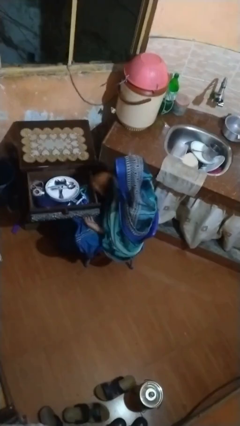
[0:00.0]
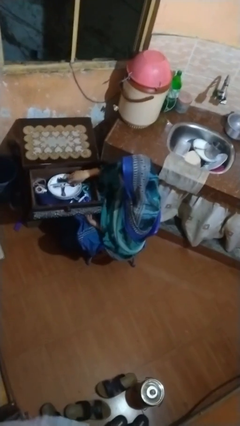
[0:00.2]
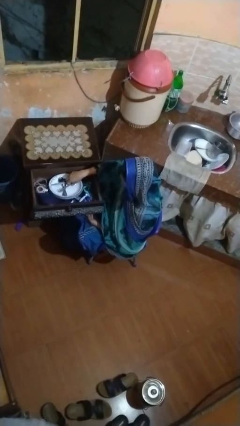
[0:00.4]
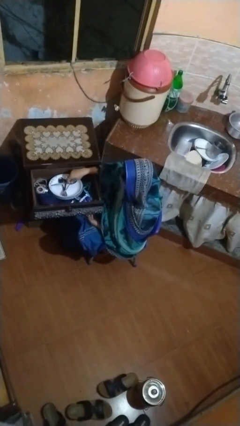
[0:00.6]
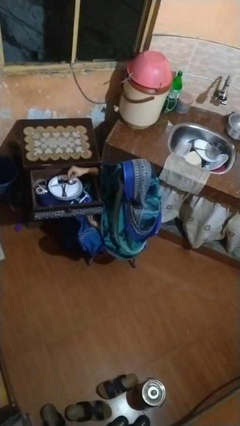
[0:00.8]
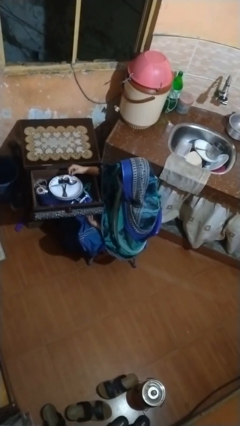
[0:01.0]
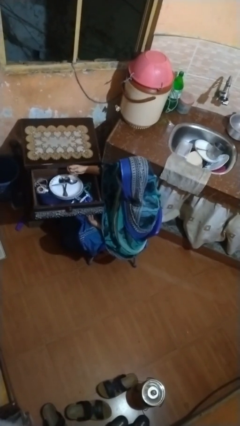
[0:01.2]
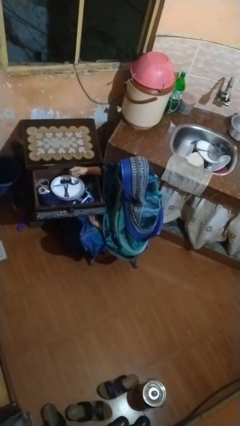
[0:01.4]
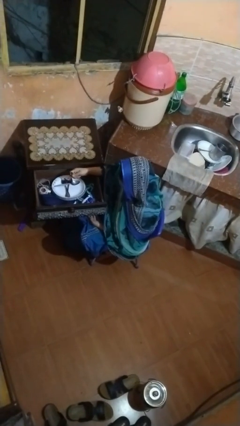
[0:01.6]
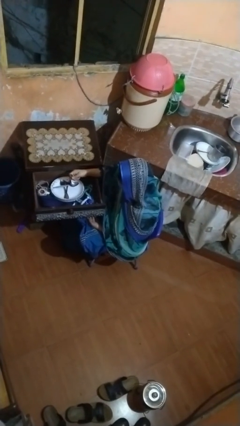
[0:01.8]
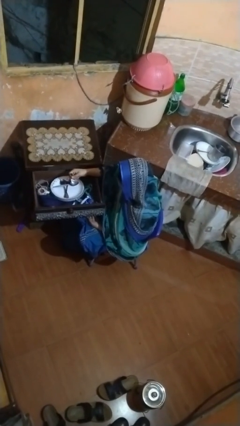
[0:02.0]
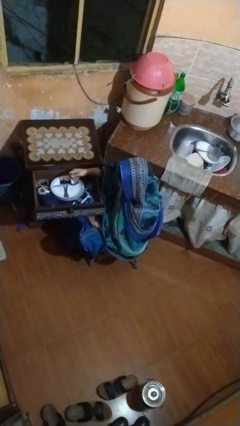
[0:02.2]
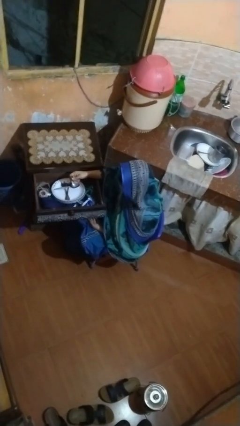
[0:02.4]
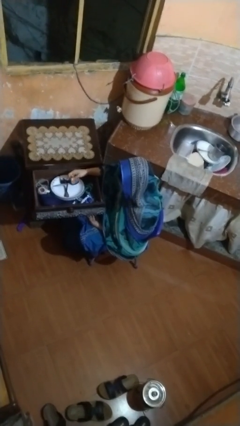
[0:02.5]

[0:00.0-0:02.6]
person takes object from kitchen drawer

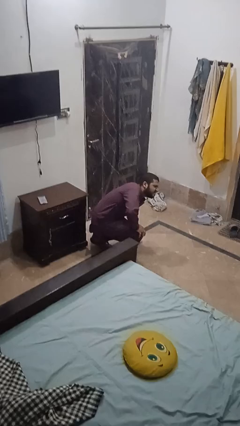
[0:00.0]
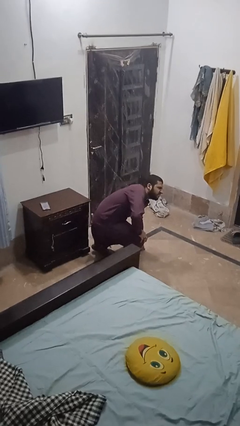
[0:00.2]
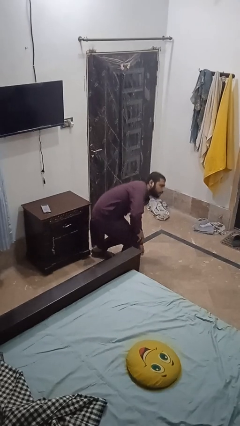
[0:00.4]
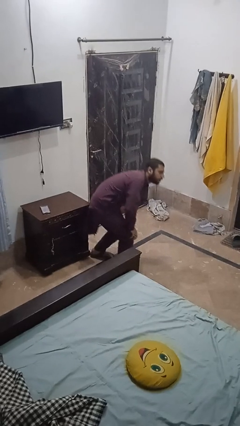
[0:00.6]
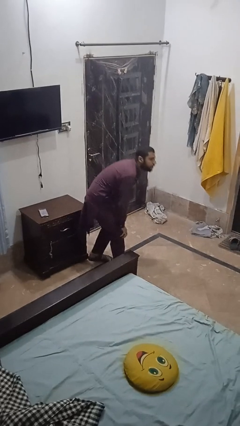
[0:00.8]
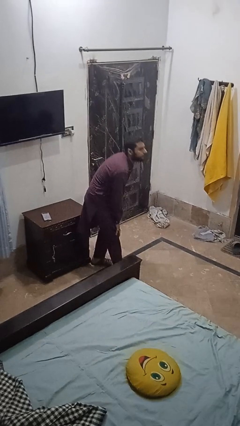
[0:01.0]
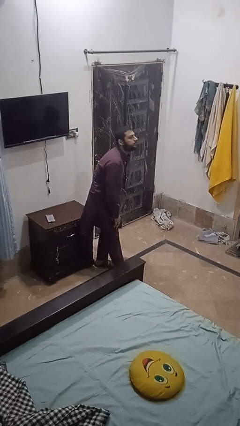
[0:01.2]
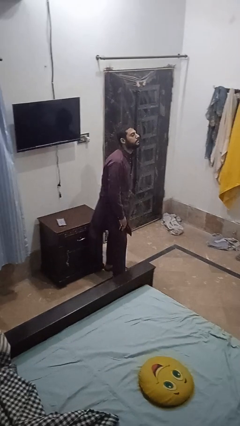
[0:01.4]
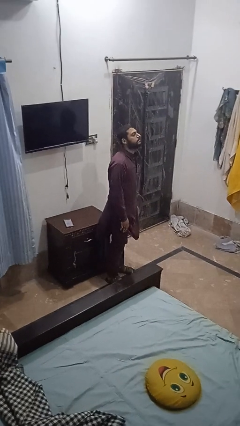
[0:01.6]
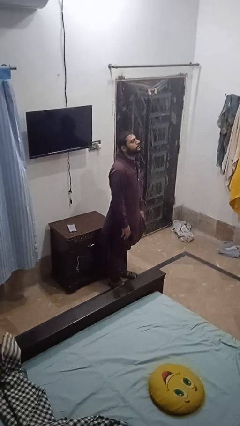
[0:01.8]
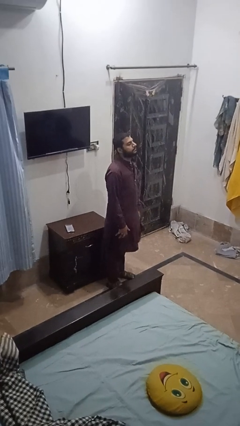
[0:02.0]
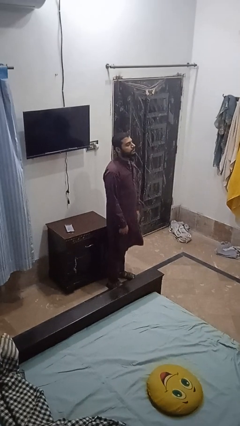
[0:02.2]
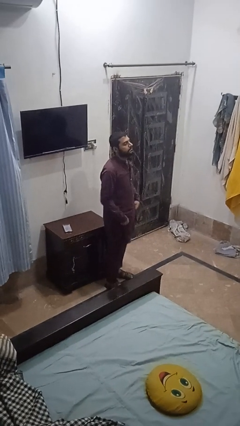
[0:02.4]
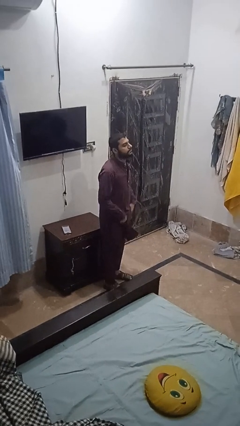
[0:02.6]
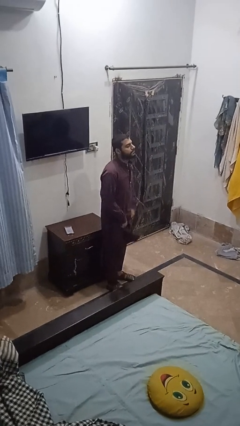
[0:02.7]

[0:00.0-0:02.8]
person stands up from floor

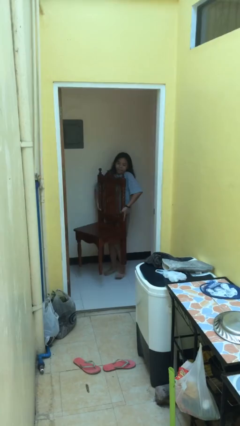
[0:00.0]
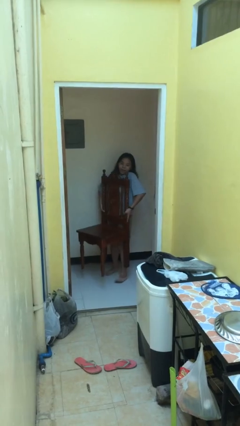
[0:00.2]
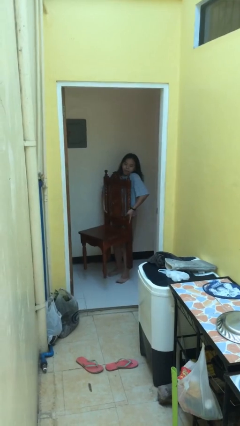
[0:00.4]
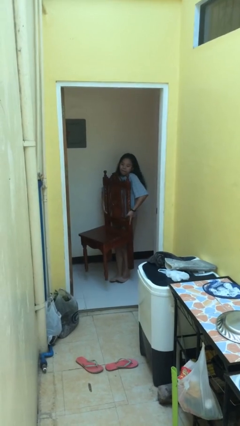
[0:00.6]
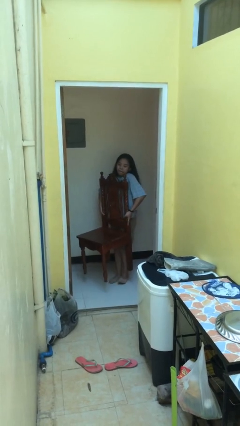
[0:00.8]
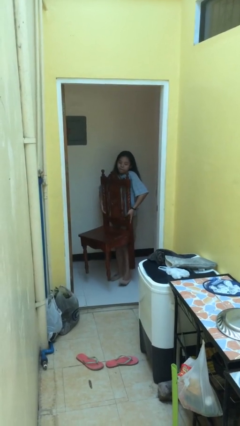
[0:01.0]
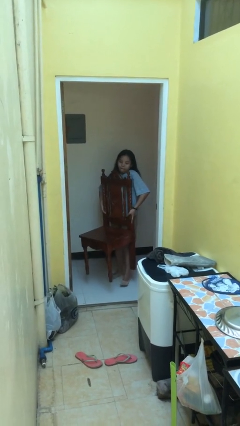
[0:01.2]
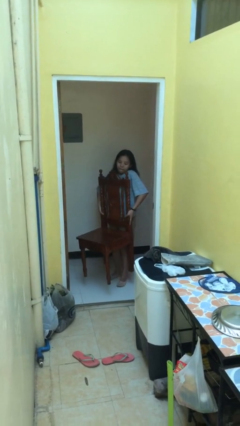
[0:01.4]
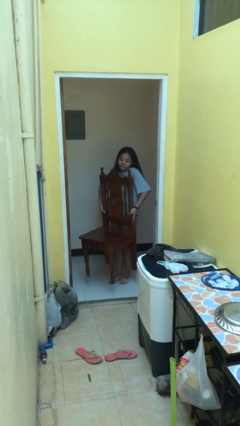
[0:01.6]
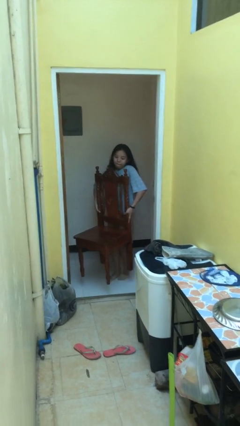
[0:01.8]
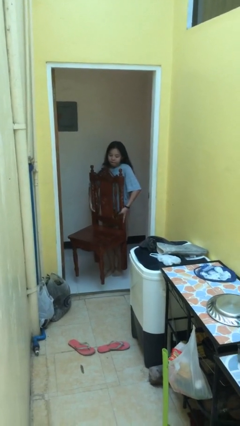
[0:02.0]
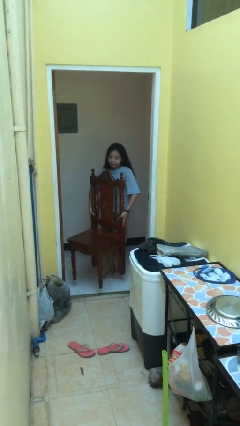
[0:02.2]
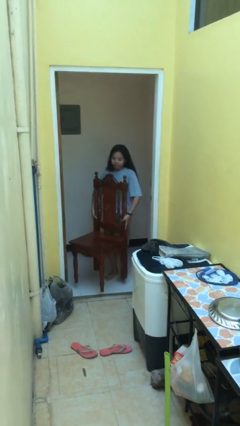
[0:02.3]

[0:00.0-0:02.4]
person carries heavy object

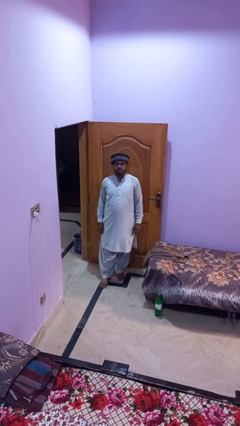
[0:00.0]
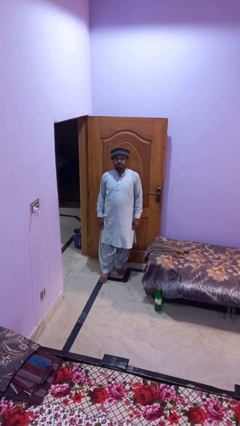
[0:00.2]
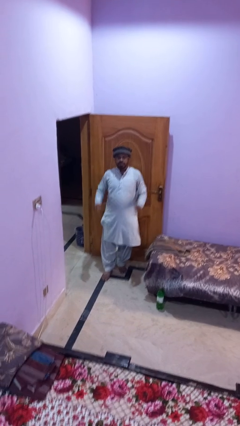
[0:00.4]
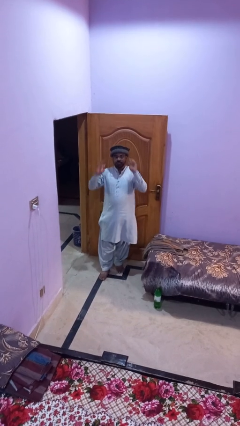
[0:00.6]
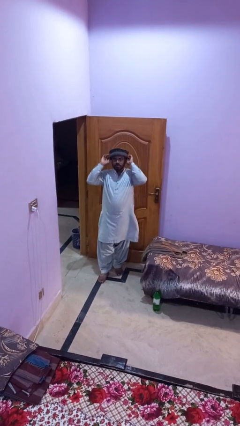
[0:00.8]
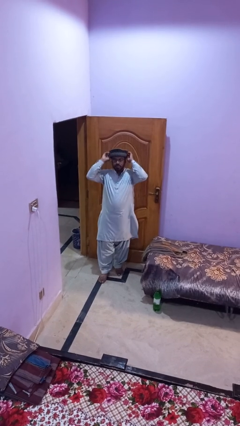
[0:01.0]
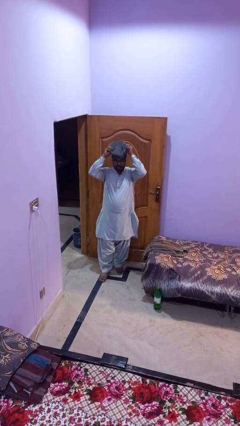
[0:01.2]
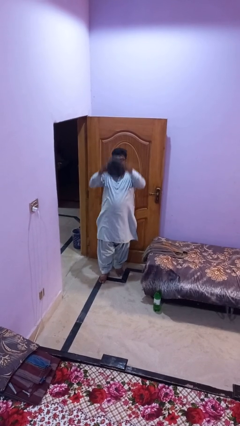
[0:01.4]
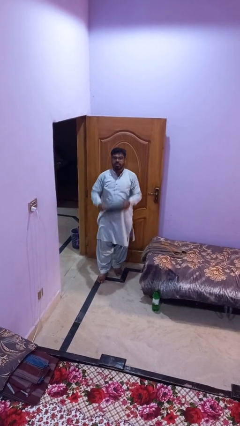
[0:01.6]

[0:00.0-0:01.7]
person takes off hat

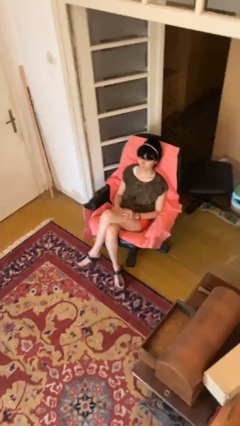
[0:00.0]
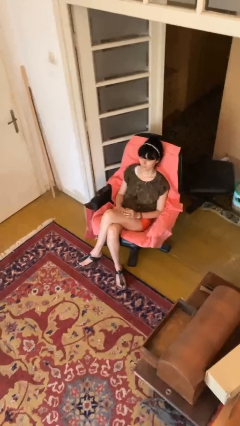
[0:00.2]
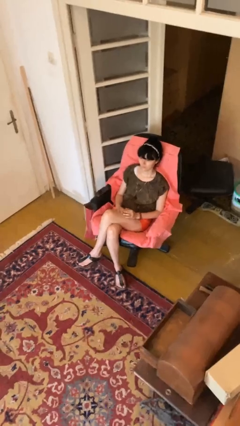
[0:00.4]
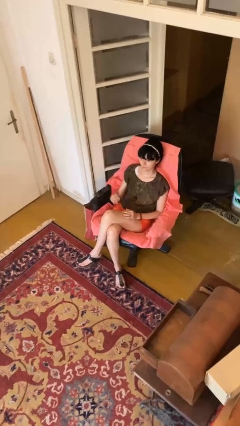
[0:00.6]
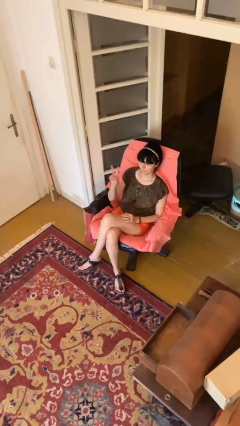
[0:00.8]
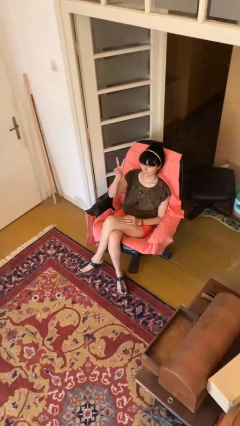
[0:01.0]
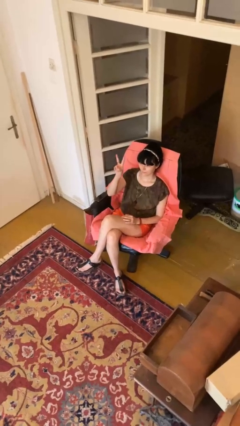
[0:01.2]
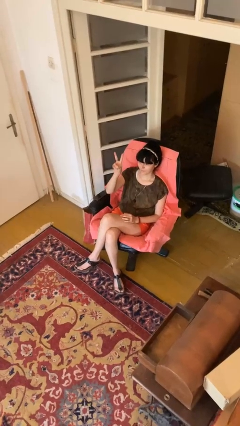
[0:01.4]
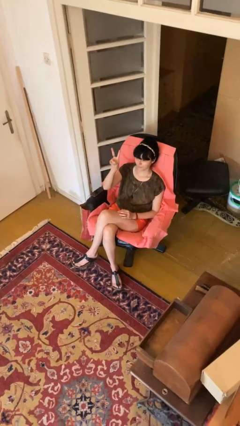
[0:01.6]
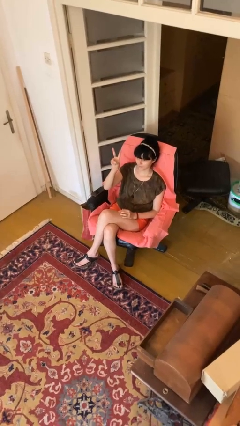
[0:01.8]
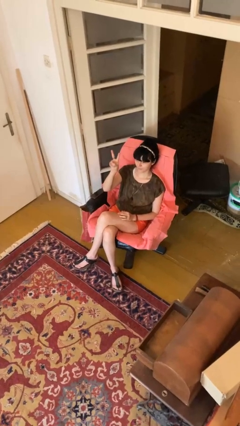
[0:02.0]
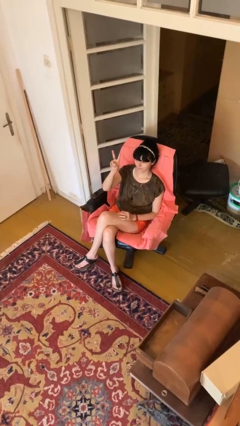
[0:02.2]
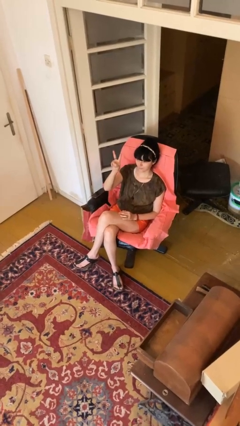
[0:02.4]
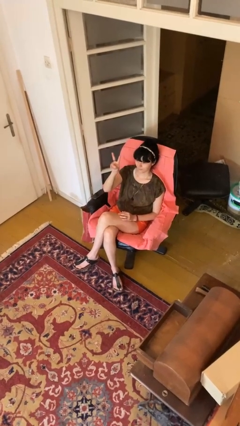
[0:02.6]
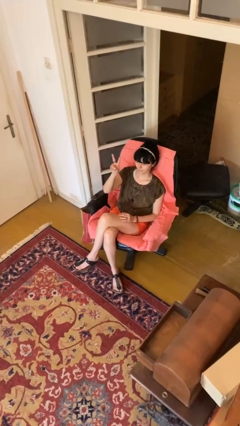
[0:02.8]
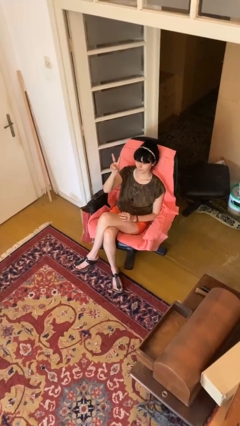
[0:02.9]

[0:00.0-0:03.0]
person gestures peace

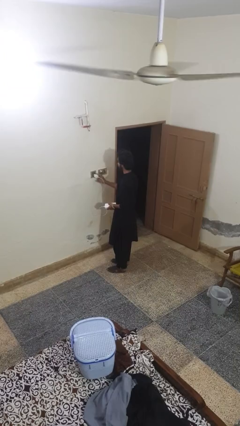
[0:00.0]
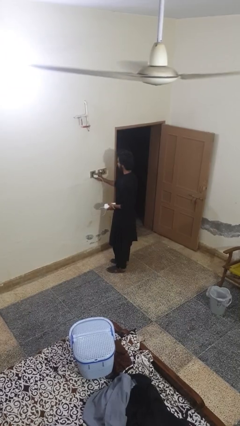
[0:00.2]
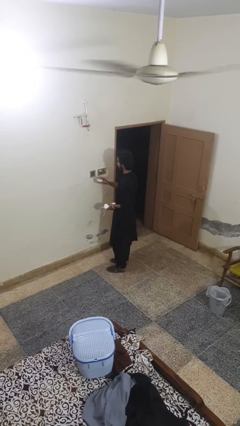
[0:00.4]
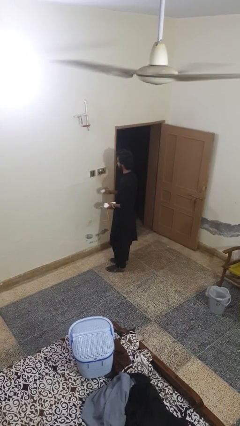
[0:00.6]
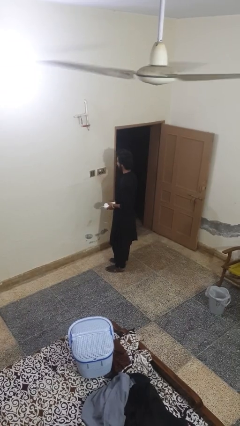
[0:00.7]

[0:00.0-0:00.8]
person unplugs from electrical socket

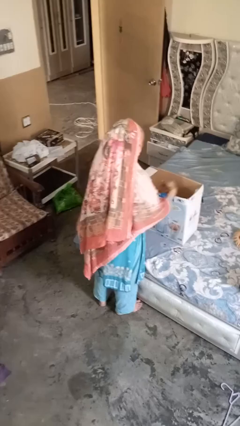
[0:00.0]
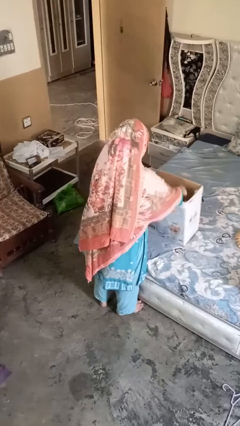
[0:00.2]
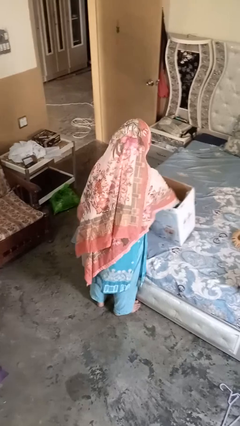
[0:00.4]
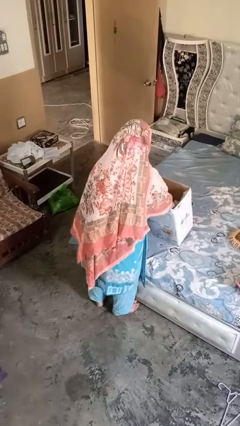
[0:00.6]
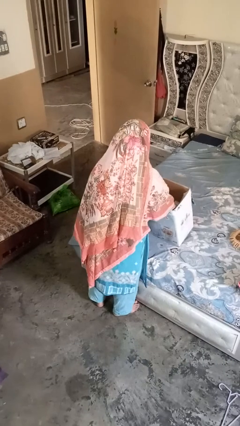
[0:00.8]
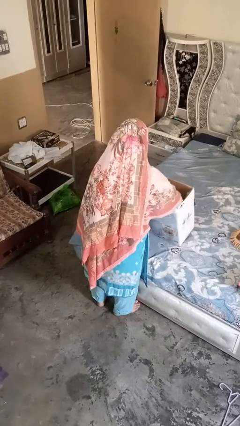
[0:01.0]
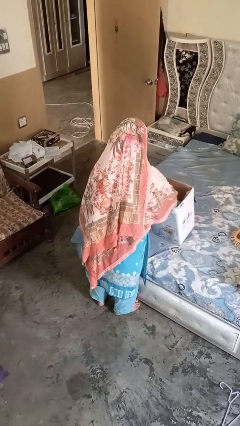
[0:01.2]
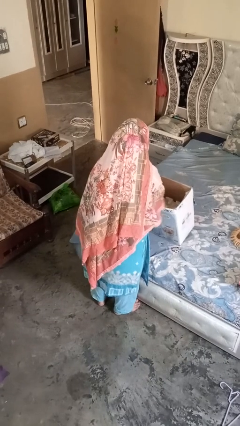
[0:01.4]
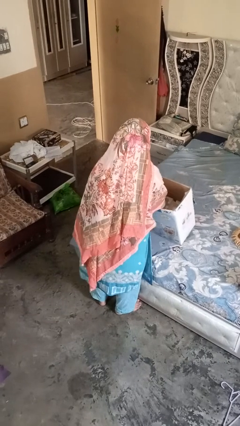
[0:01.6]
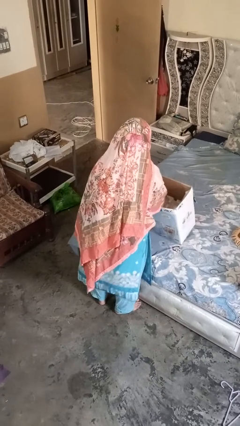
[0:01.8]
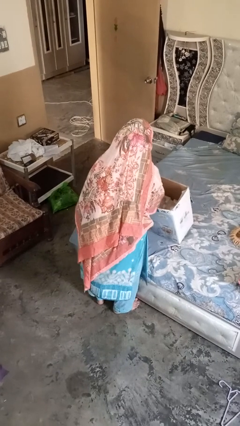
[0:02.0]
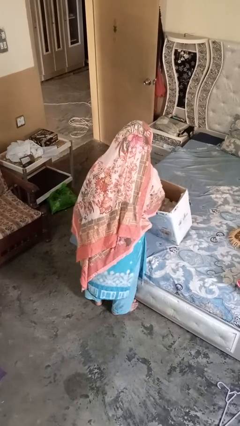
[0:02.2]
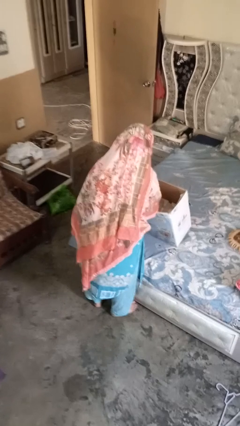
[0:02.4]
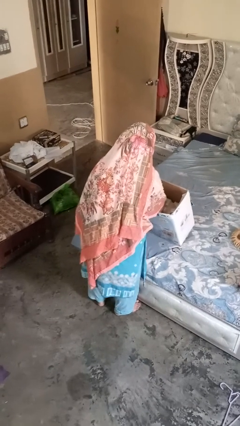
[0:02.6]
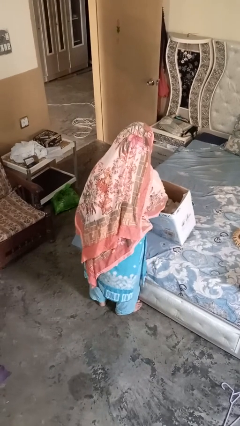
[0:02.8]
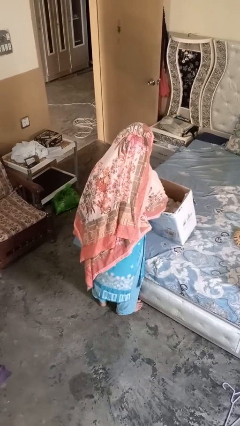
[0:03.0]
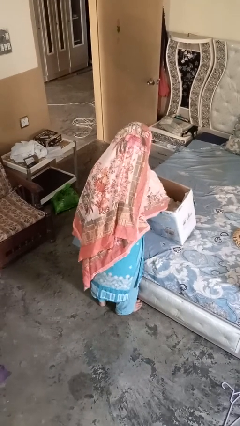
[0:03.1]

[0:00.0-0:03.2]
person searches in box

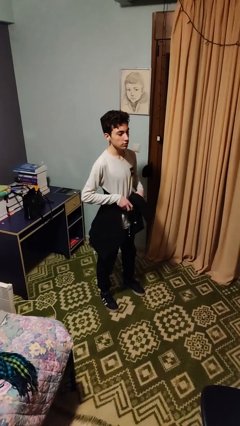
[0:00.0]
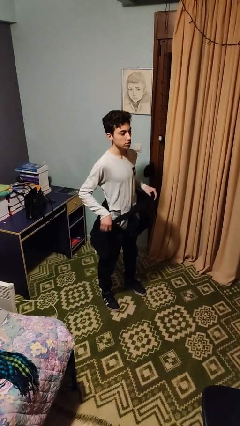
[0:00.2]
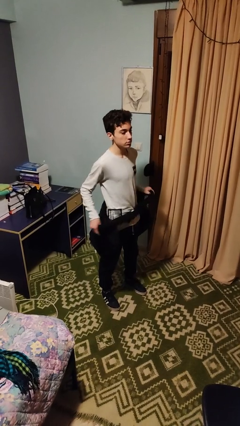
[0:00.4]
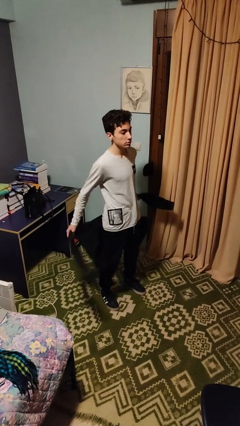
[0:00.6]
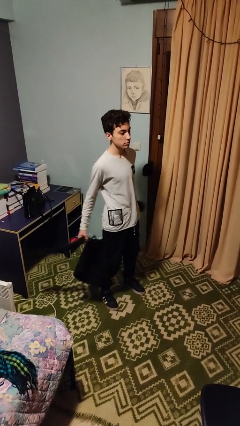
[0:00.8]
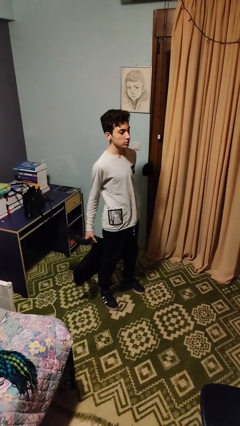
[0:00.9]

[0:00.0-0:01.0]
person unties jacket around waist
